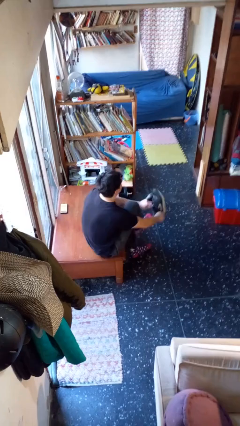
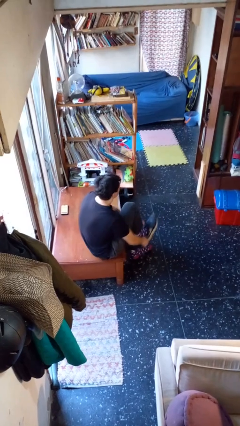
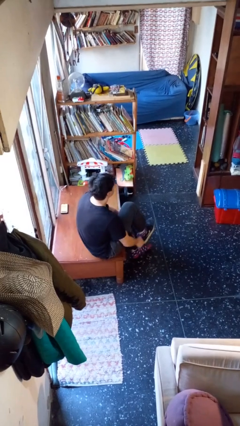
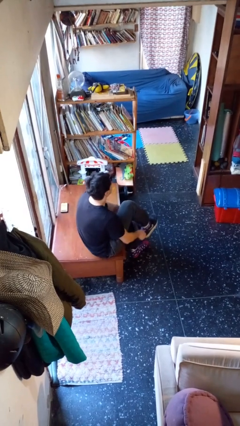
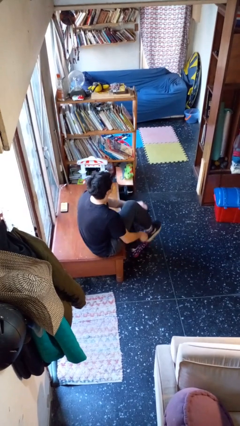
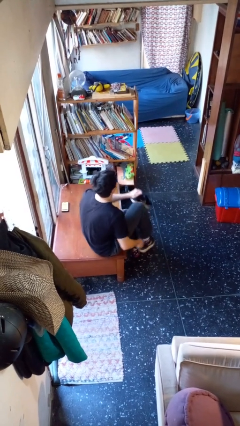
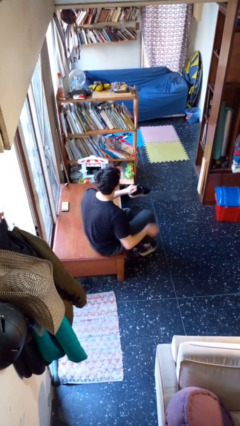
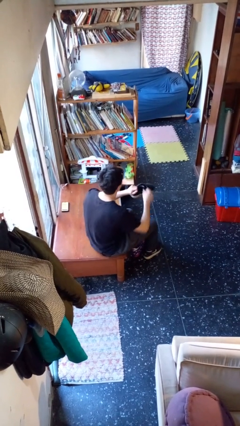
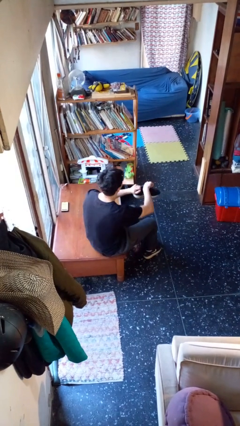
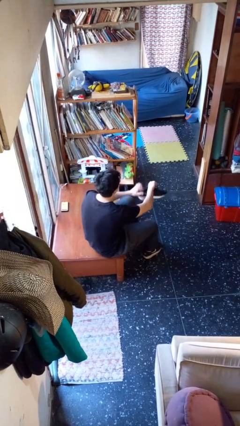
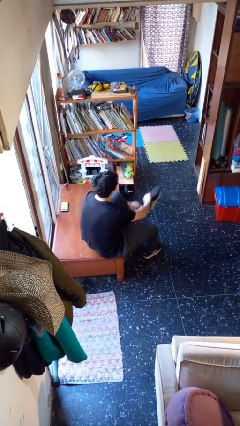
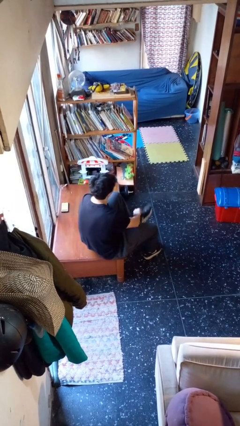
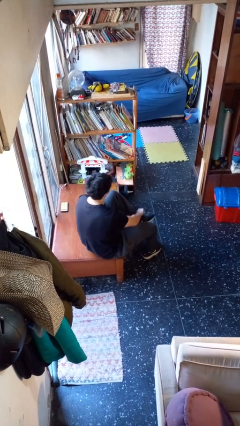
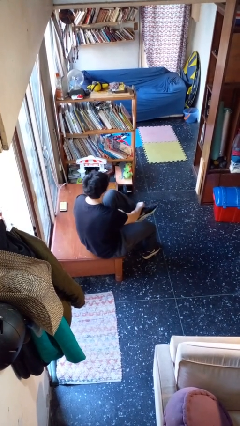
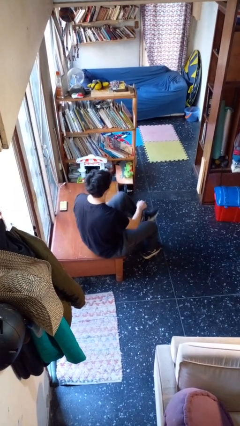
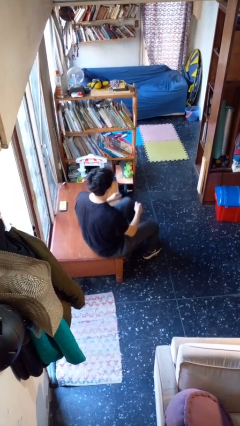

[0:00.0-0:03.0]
person puts on shoes

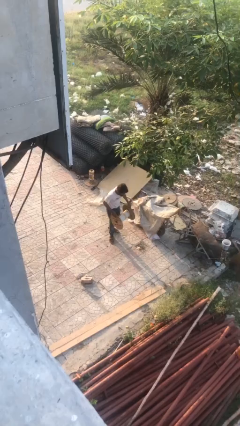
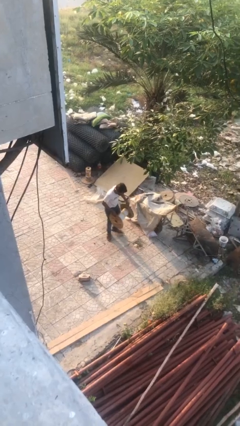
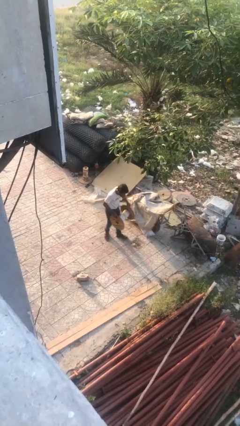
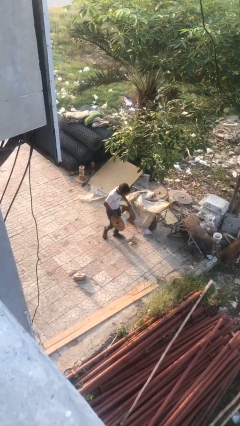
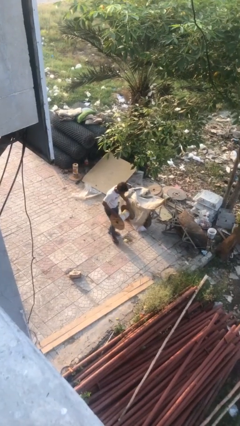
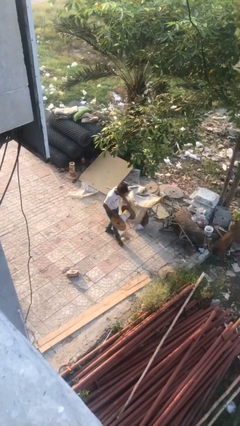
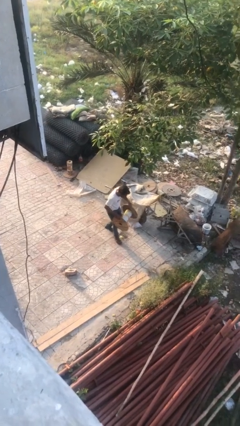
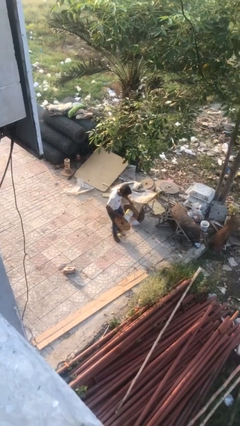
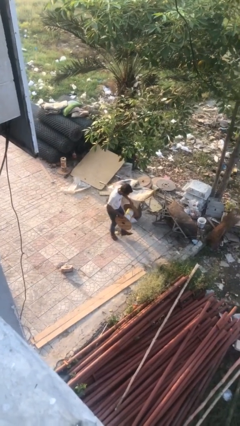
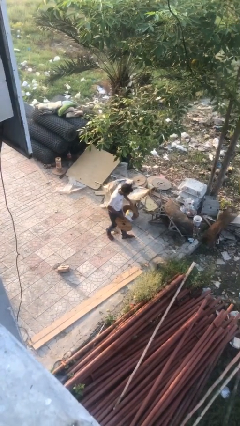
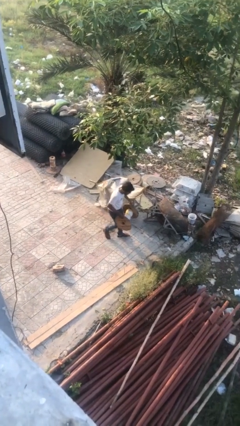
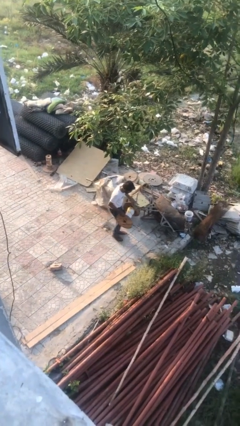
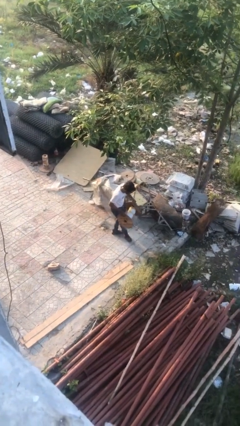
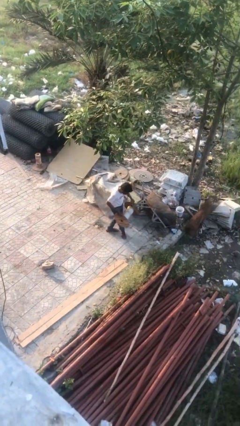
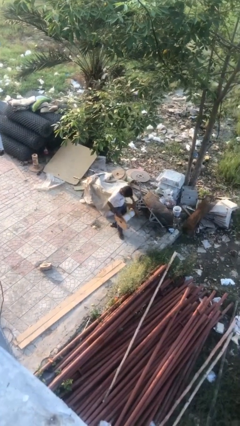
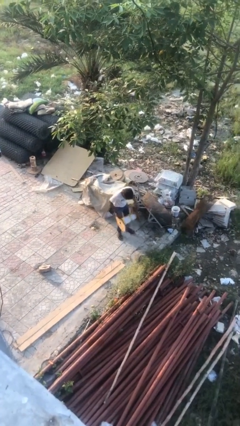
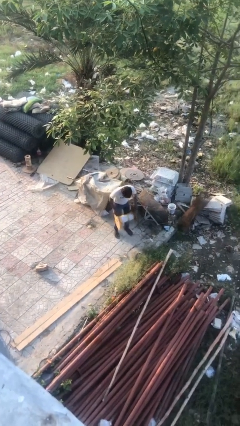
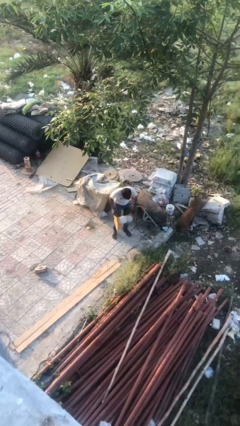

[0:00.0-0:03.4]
person carries heavy object

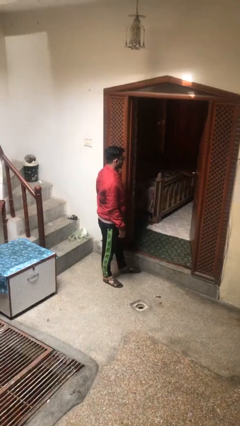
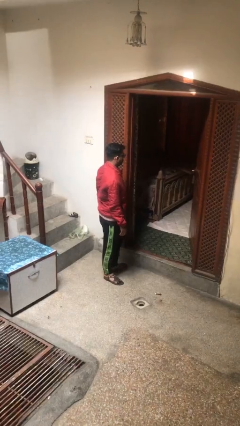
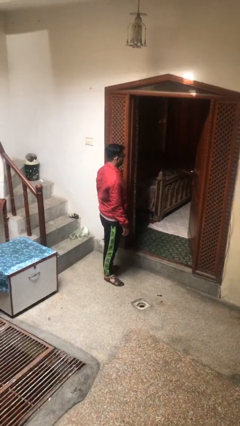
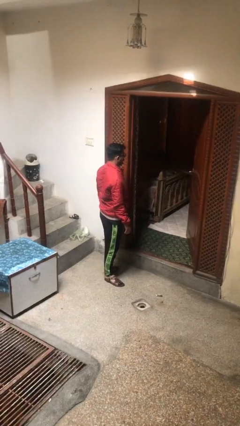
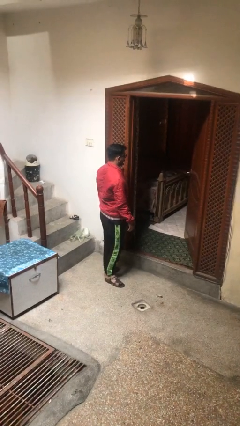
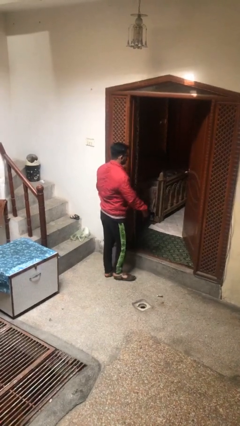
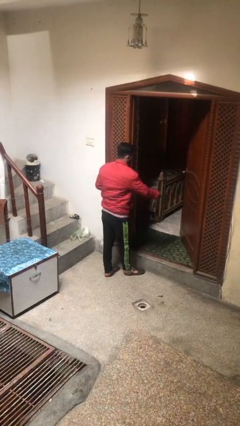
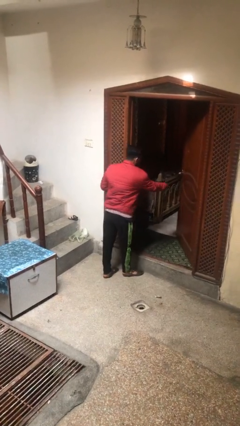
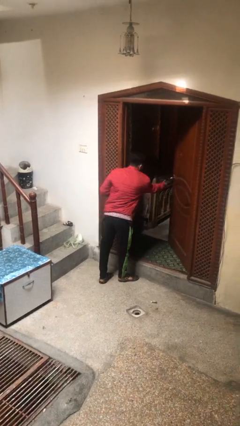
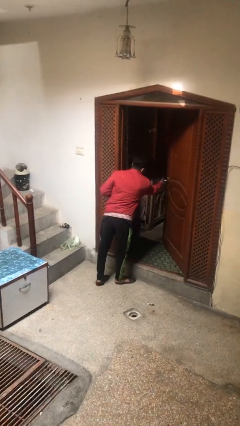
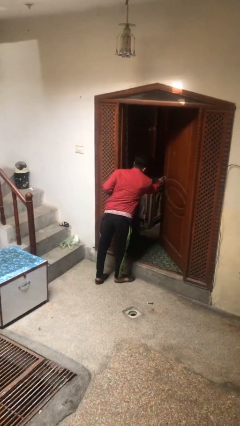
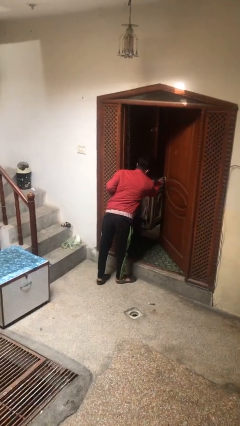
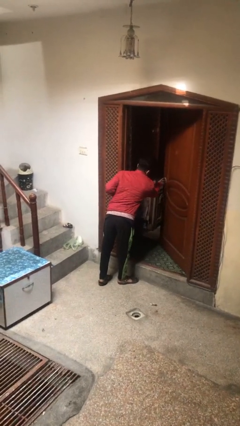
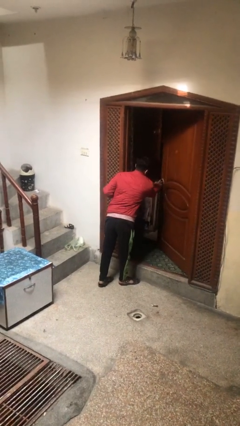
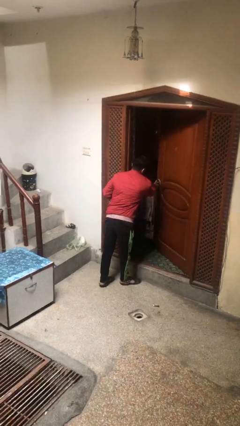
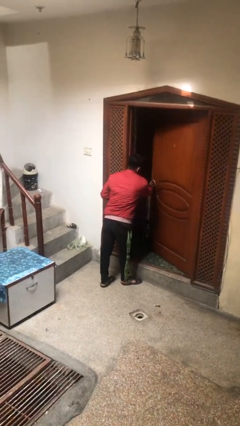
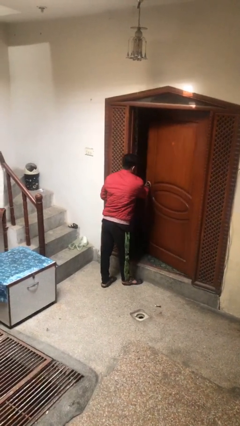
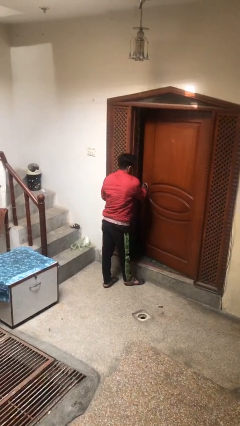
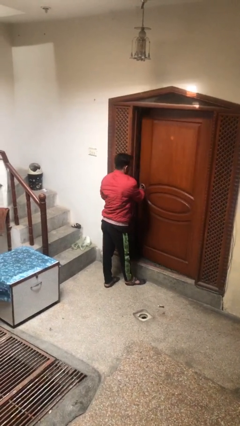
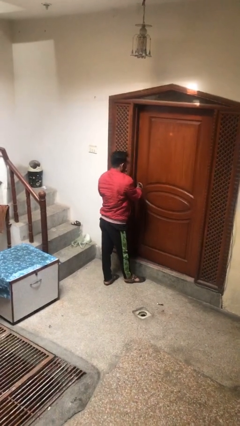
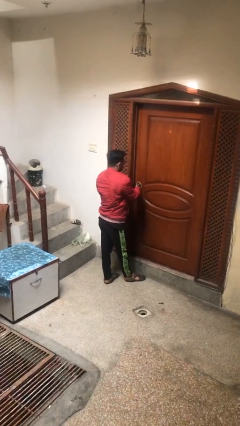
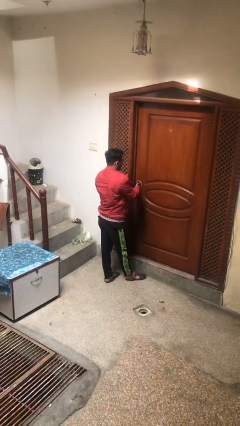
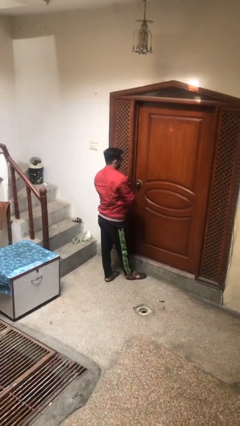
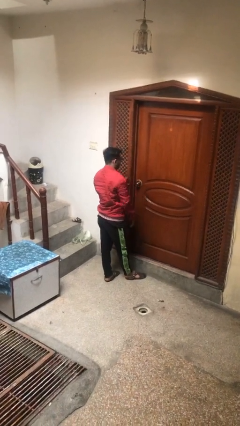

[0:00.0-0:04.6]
person closes facility door

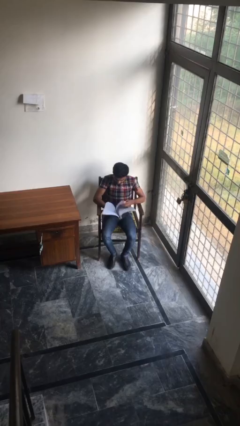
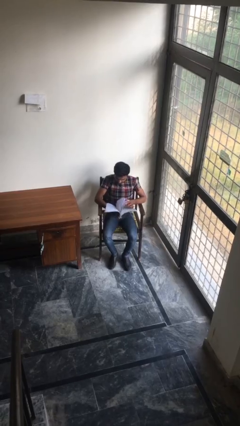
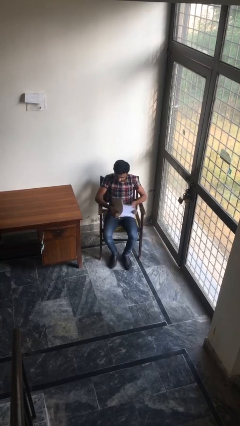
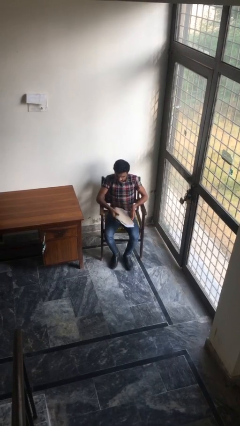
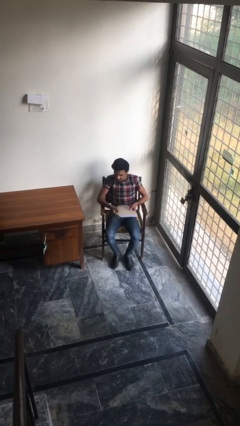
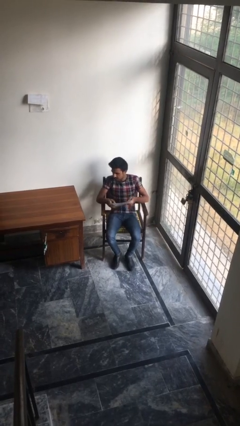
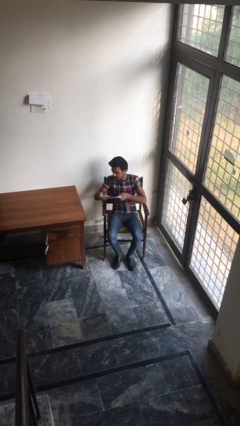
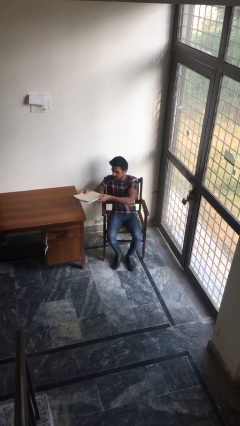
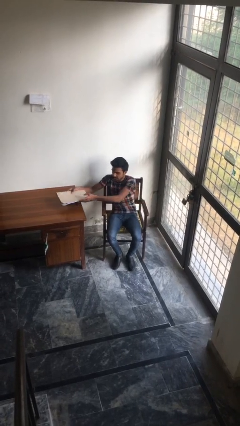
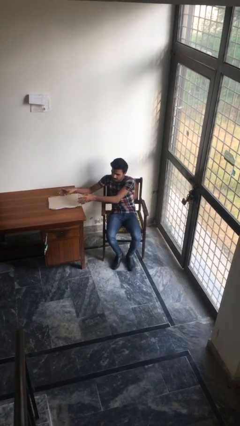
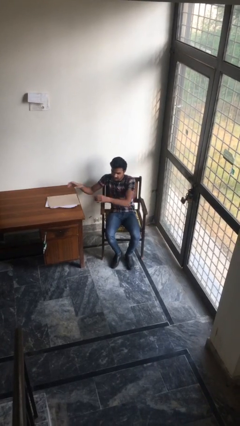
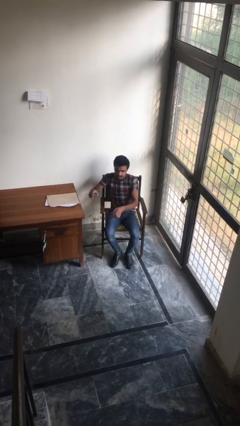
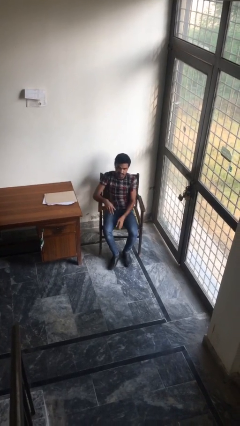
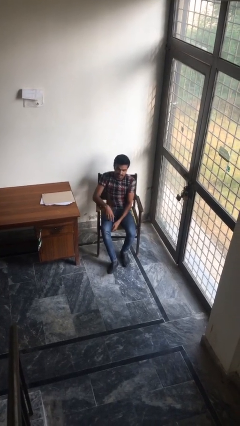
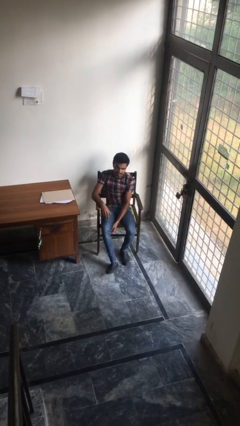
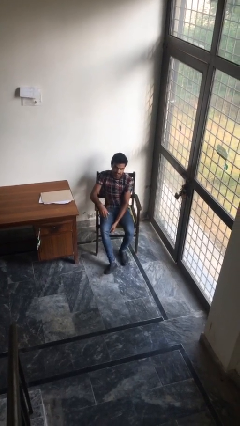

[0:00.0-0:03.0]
person puts down object on table

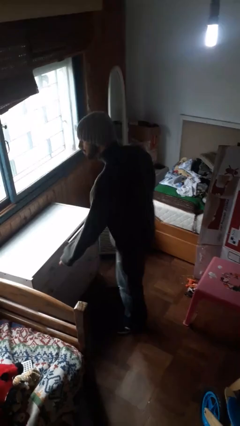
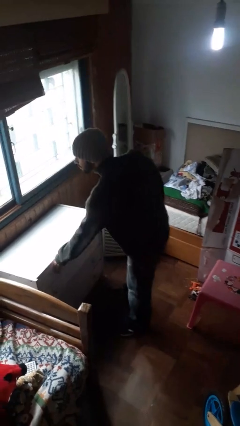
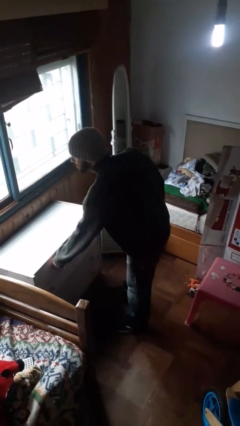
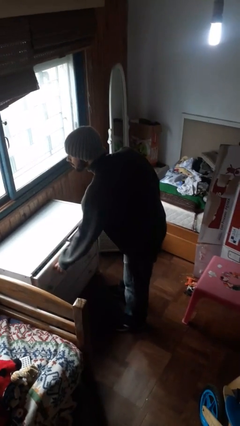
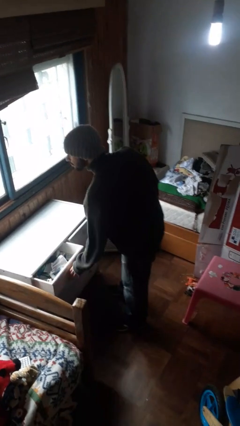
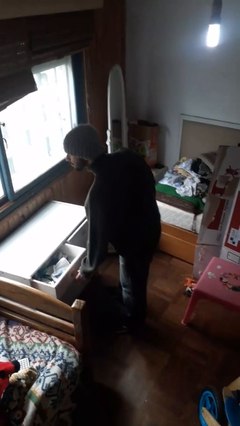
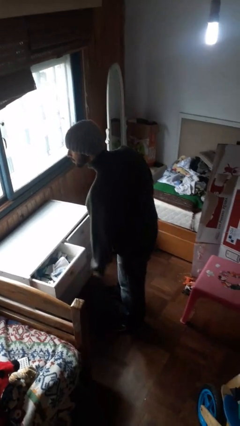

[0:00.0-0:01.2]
person opens dresser drawer

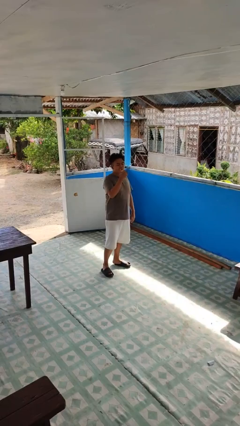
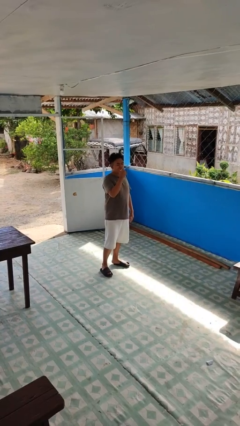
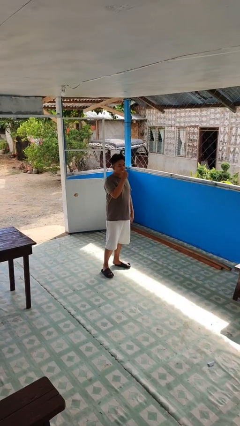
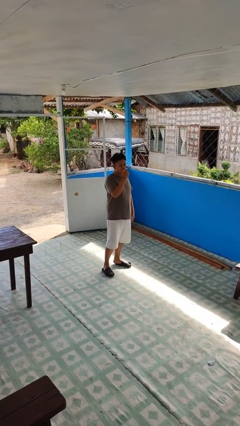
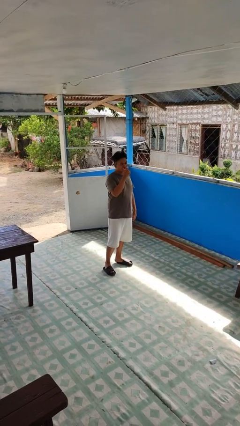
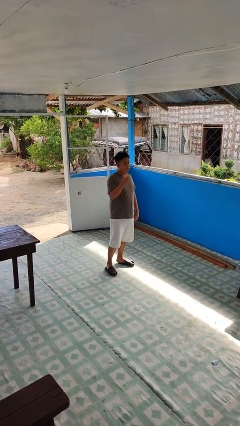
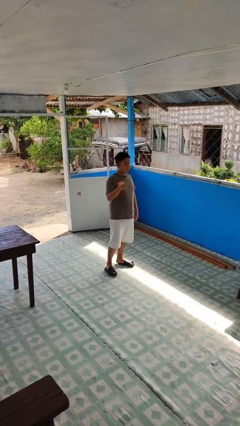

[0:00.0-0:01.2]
person eats apple

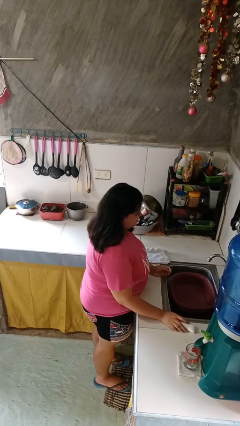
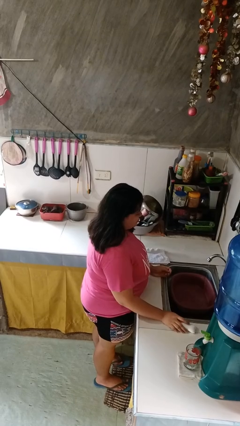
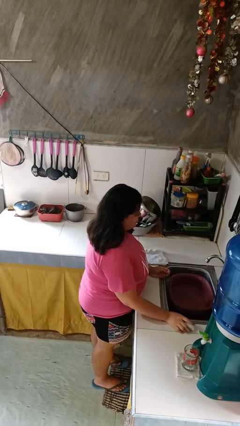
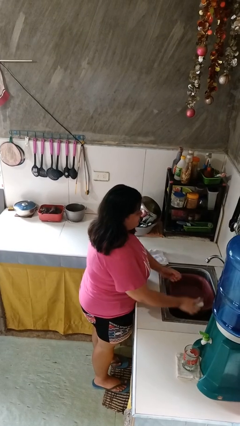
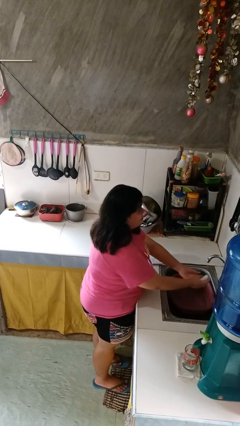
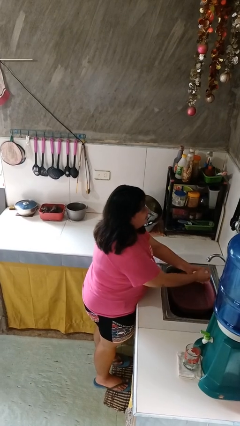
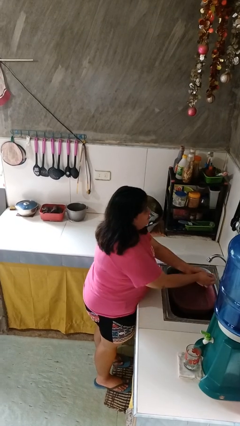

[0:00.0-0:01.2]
person washes hands
